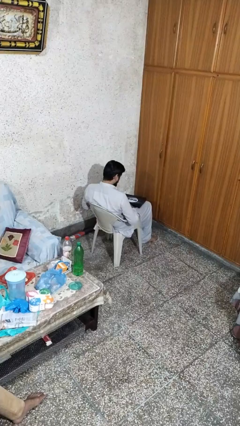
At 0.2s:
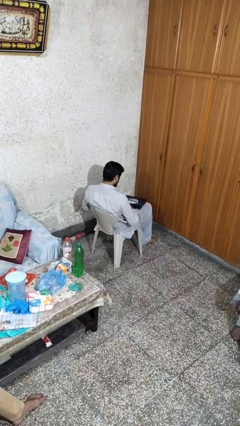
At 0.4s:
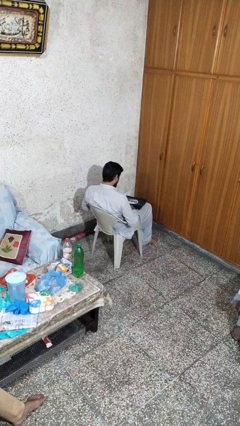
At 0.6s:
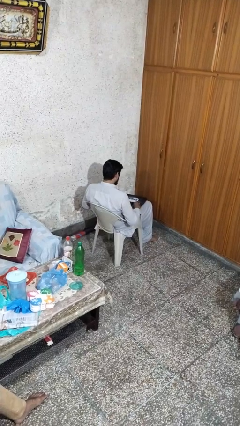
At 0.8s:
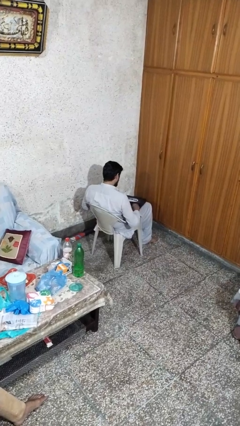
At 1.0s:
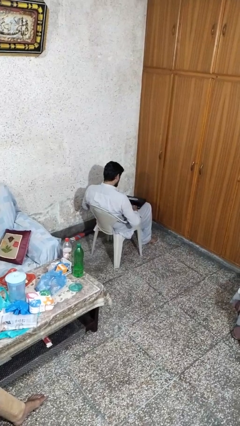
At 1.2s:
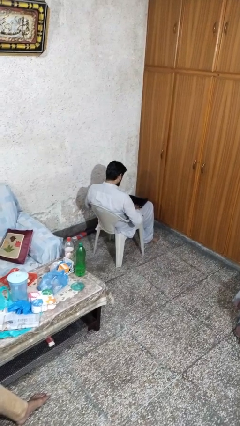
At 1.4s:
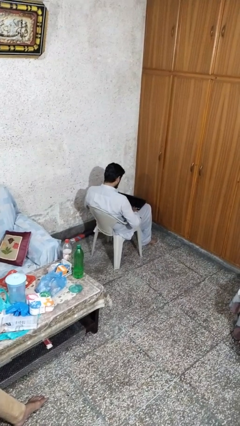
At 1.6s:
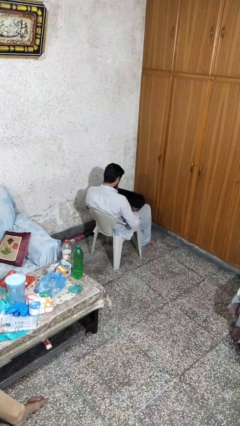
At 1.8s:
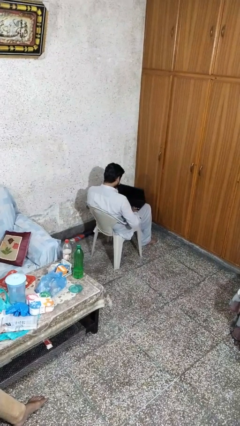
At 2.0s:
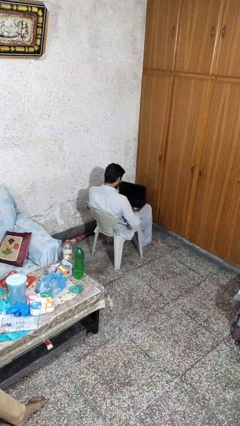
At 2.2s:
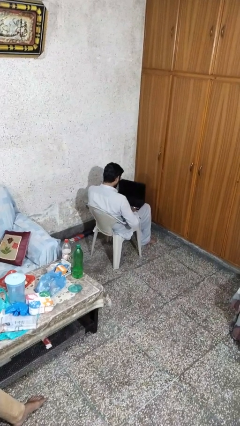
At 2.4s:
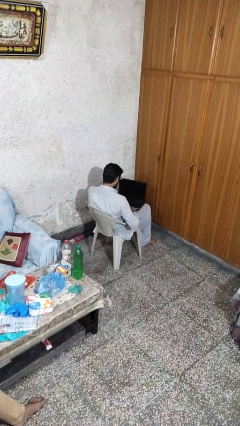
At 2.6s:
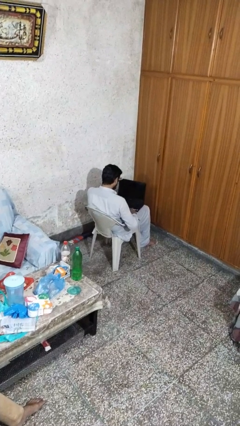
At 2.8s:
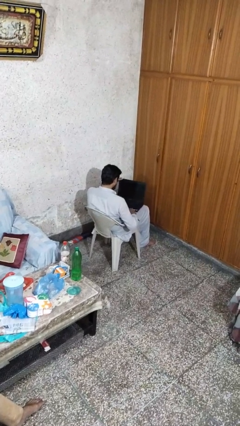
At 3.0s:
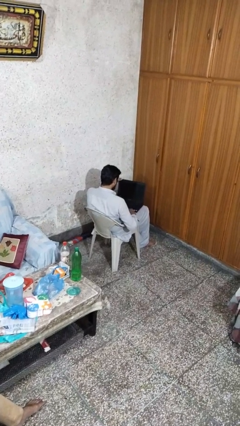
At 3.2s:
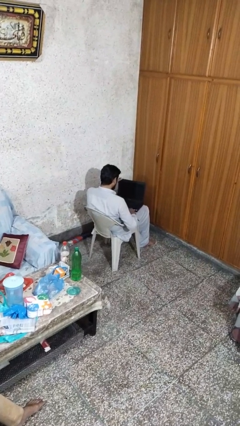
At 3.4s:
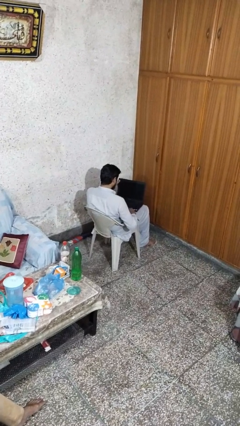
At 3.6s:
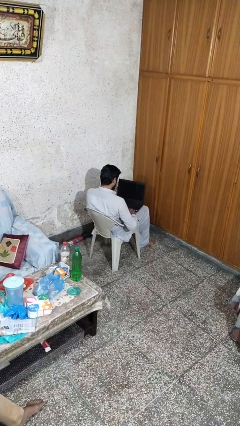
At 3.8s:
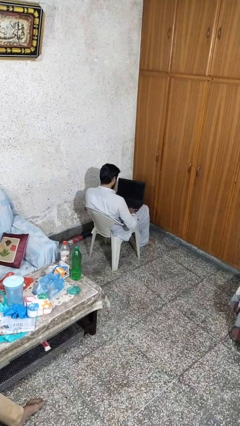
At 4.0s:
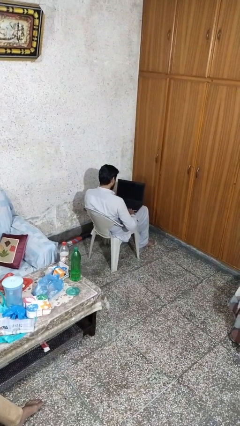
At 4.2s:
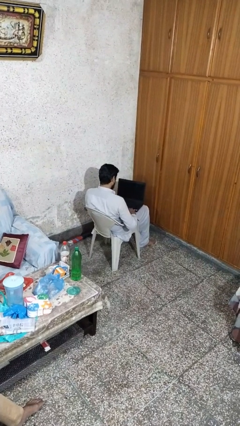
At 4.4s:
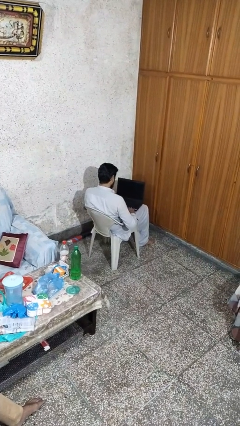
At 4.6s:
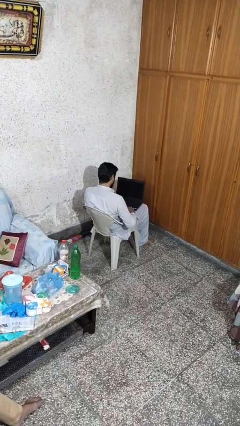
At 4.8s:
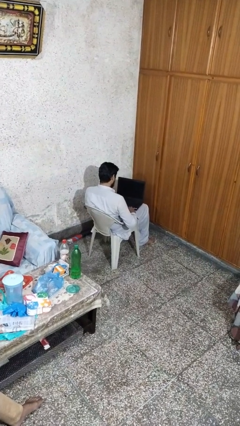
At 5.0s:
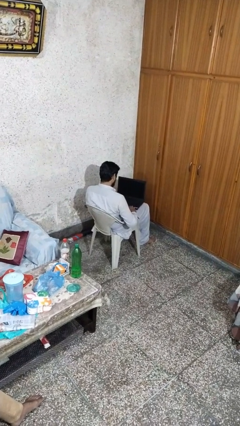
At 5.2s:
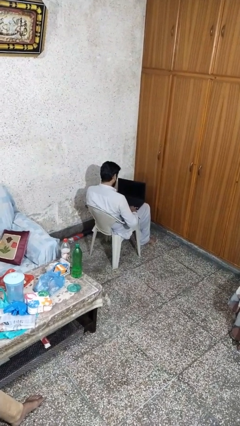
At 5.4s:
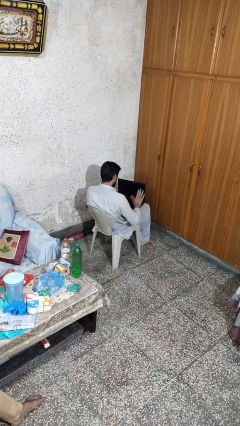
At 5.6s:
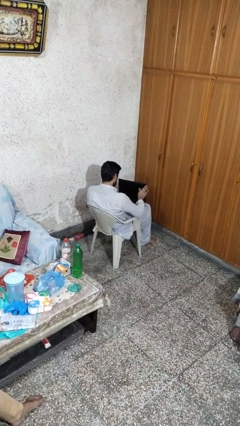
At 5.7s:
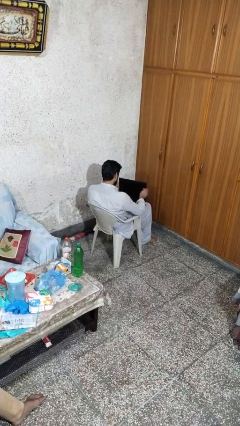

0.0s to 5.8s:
person opens laptop

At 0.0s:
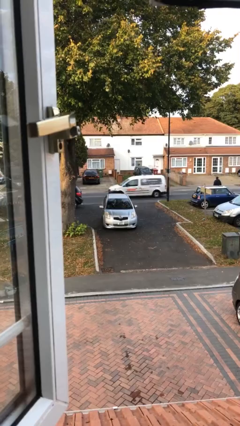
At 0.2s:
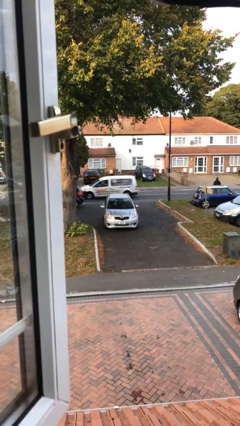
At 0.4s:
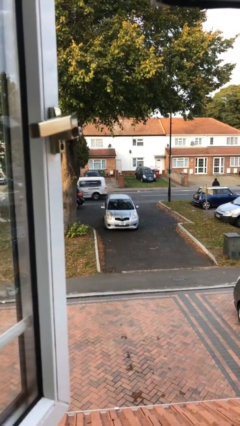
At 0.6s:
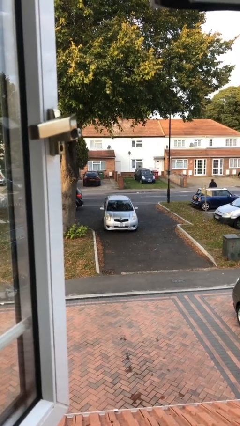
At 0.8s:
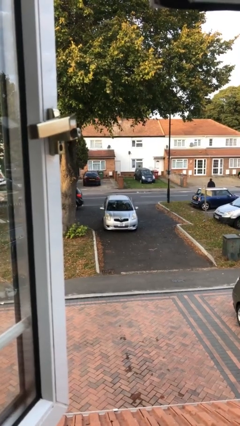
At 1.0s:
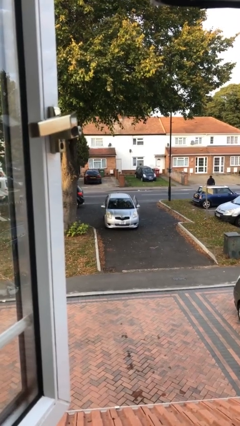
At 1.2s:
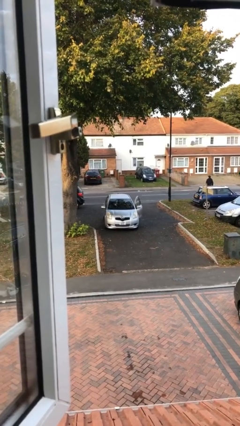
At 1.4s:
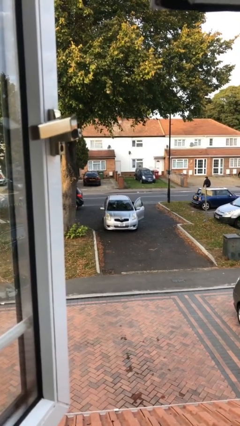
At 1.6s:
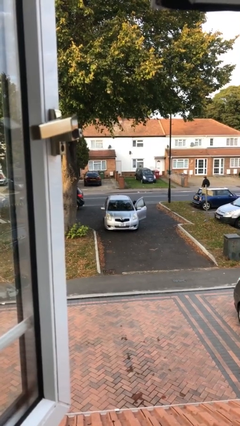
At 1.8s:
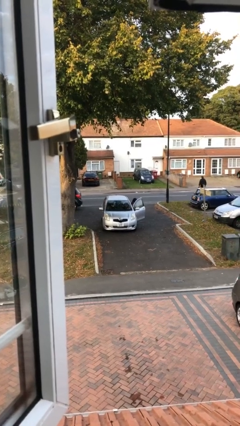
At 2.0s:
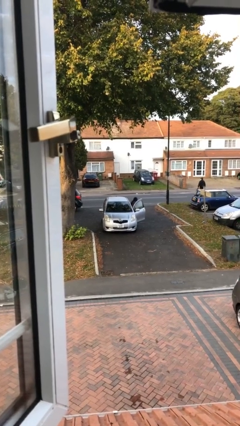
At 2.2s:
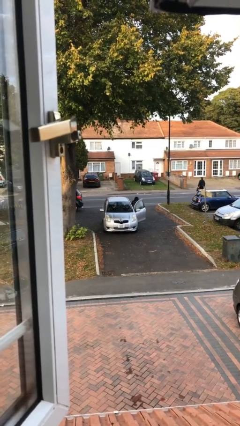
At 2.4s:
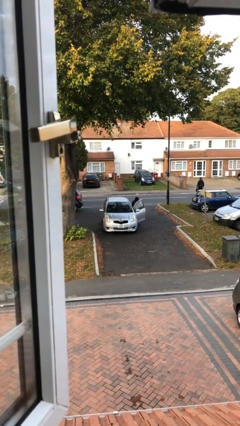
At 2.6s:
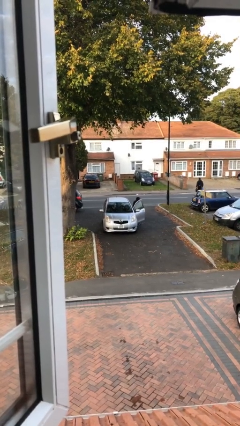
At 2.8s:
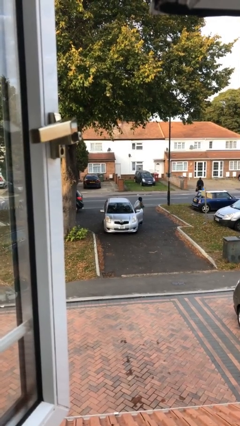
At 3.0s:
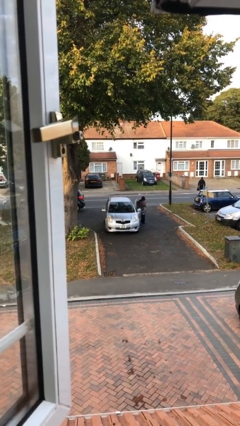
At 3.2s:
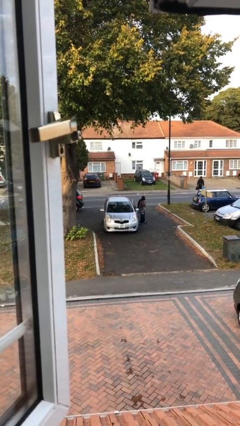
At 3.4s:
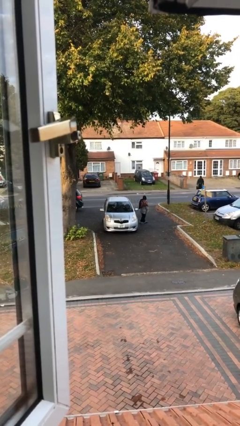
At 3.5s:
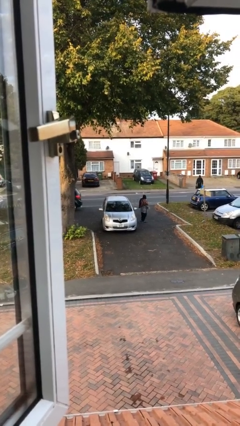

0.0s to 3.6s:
car drops off person

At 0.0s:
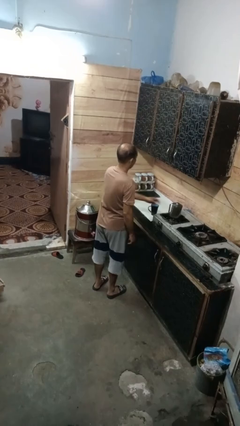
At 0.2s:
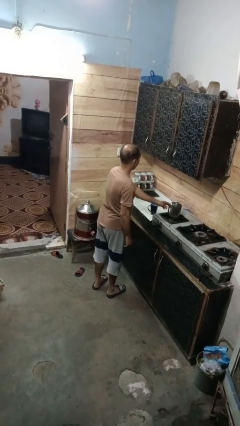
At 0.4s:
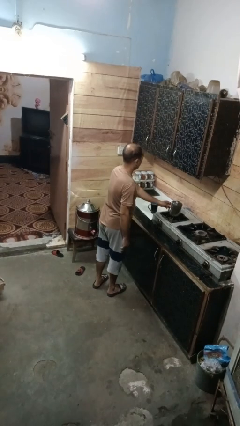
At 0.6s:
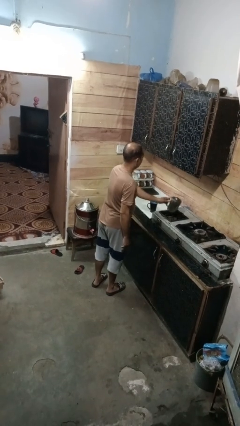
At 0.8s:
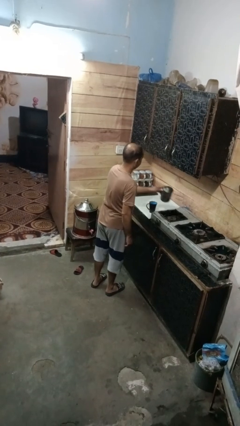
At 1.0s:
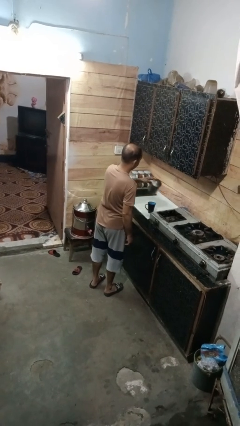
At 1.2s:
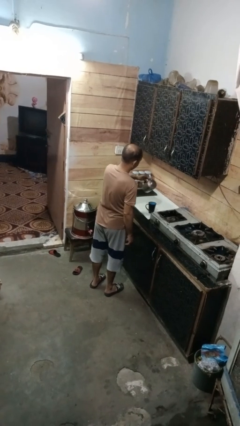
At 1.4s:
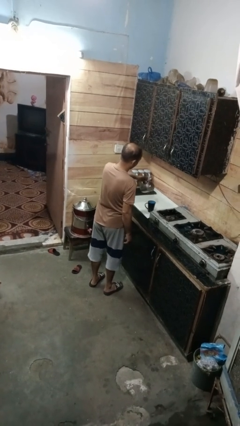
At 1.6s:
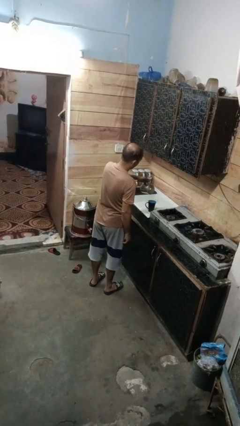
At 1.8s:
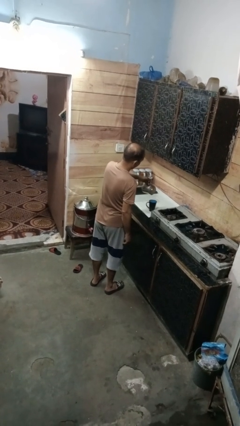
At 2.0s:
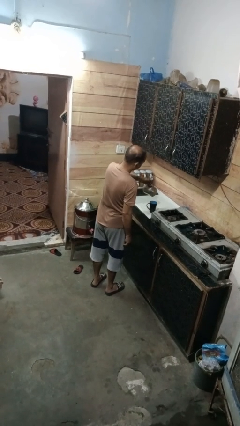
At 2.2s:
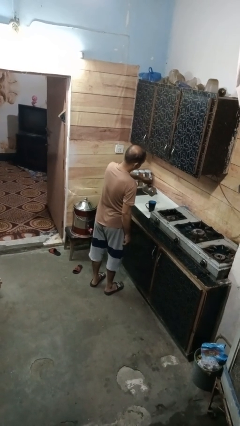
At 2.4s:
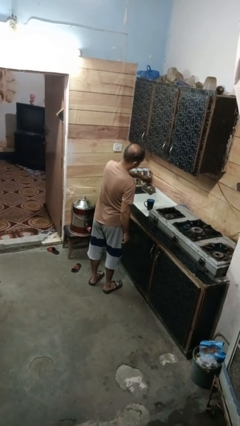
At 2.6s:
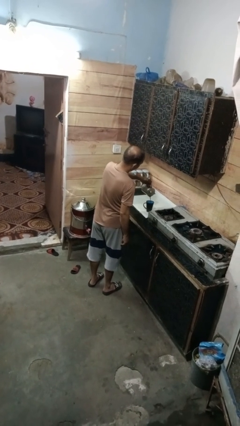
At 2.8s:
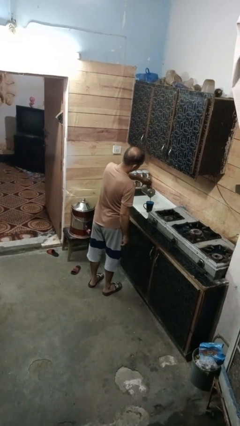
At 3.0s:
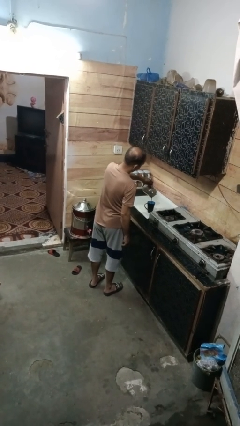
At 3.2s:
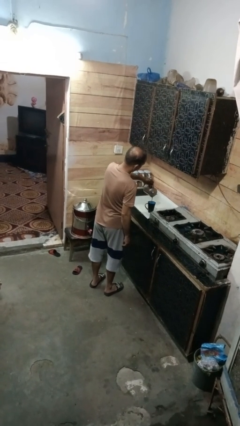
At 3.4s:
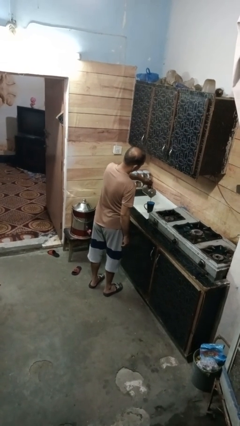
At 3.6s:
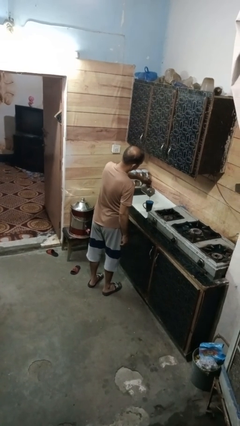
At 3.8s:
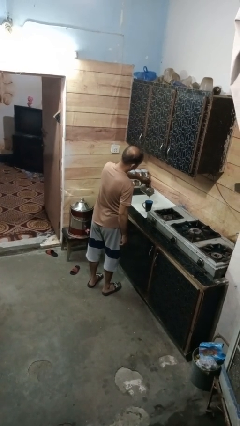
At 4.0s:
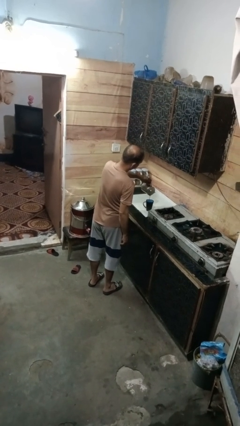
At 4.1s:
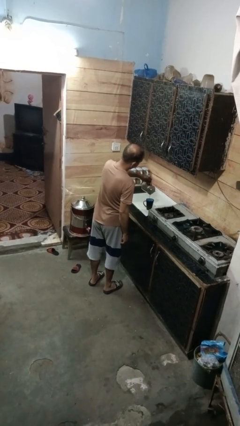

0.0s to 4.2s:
person pours coffee into mug

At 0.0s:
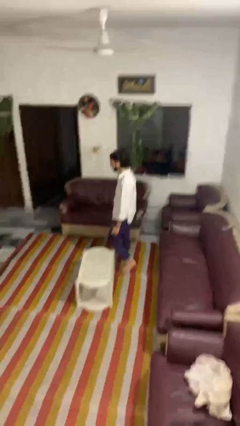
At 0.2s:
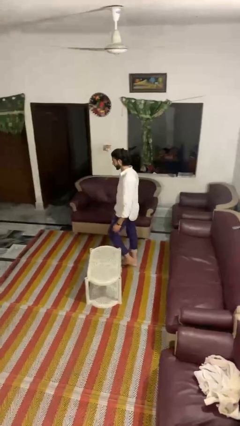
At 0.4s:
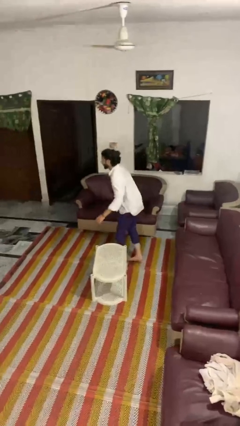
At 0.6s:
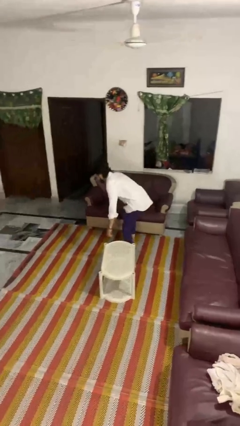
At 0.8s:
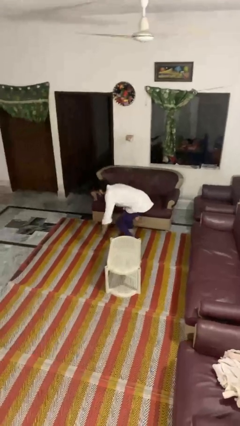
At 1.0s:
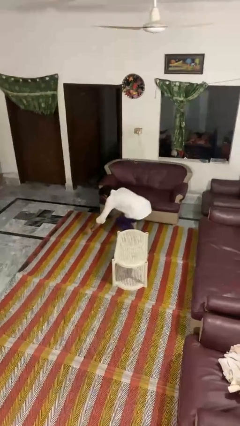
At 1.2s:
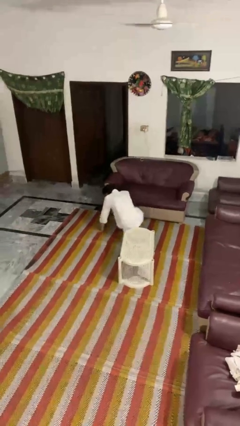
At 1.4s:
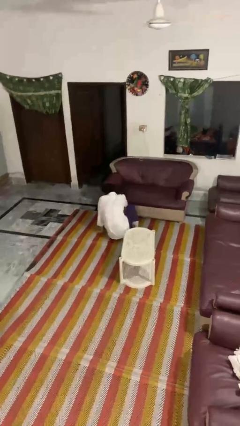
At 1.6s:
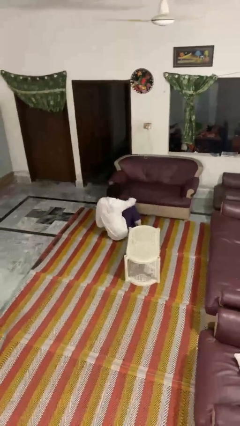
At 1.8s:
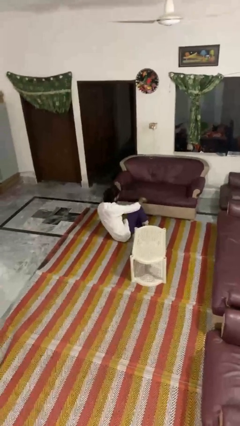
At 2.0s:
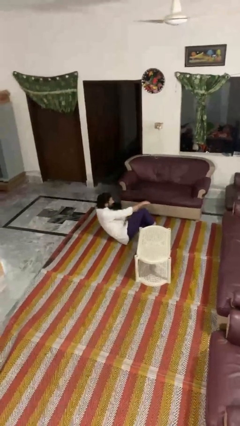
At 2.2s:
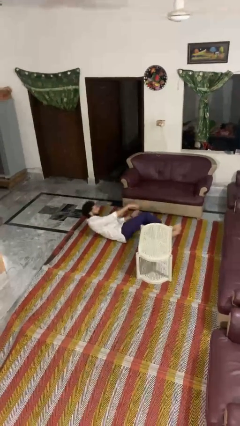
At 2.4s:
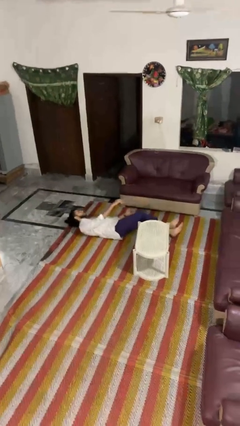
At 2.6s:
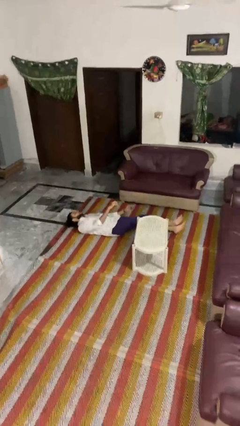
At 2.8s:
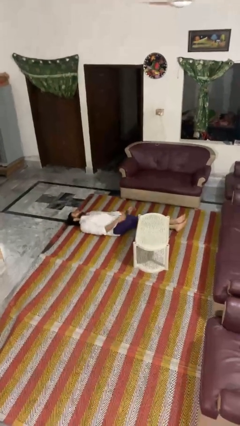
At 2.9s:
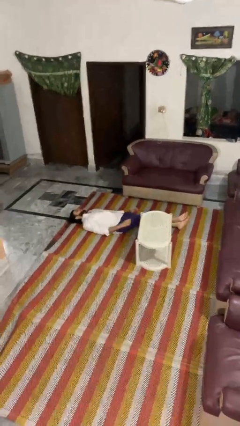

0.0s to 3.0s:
person trips on object on floor

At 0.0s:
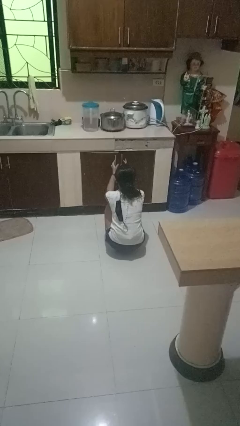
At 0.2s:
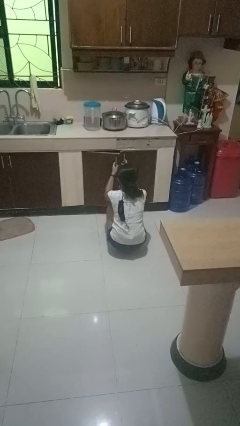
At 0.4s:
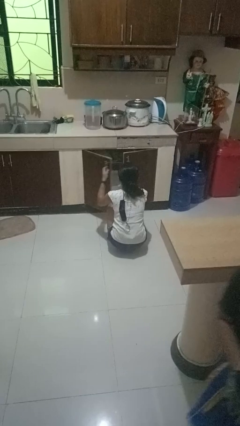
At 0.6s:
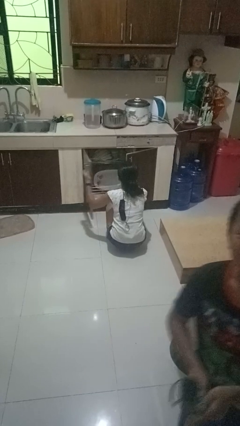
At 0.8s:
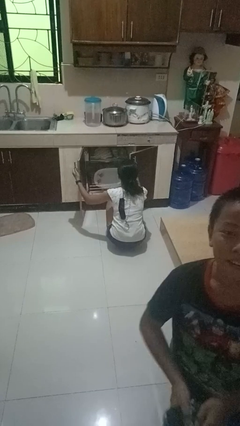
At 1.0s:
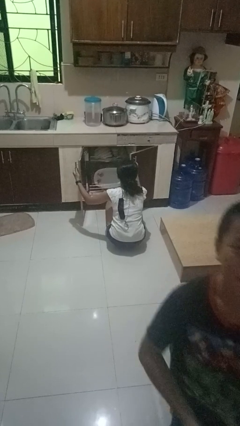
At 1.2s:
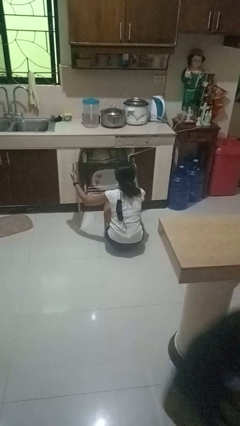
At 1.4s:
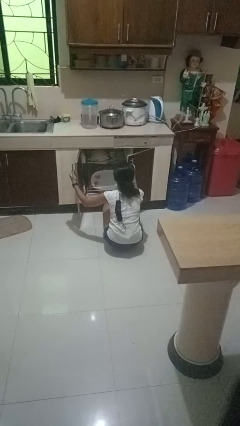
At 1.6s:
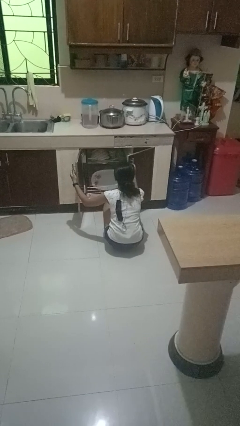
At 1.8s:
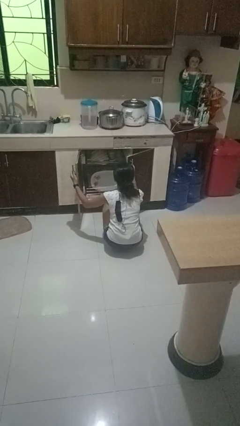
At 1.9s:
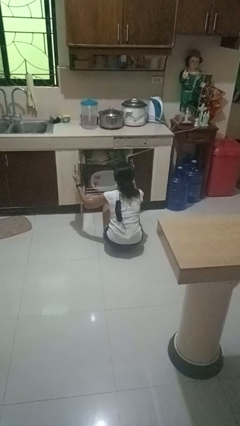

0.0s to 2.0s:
person opens dishwasher
